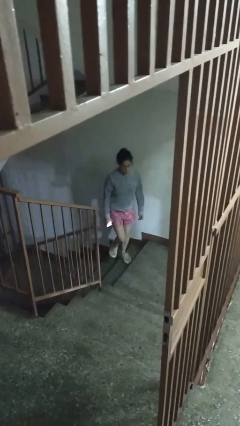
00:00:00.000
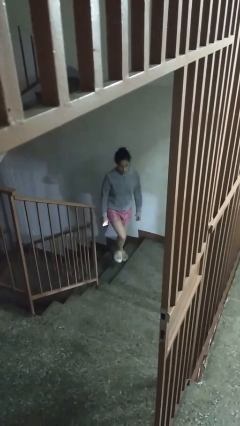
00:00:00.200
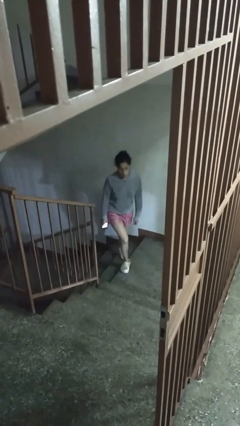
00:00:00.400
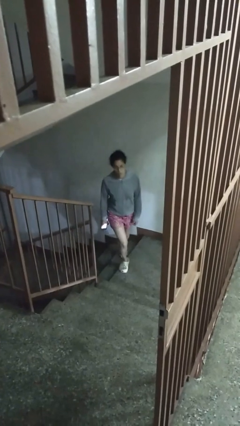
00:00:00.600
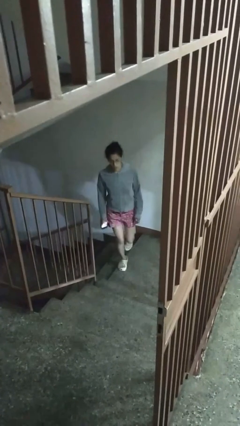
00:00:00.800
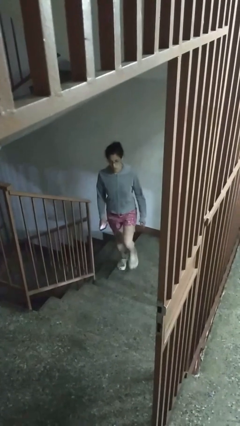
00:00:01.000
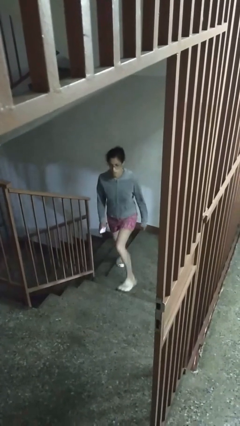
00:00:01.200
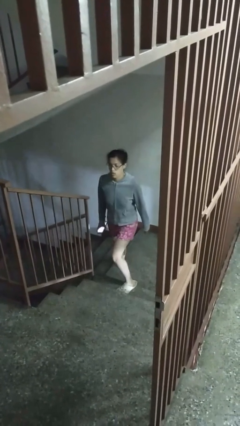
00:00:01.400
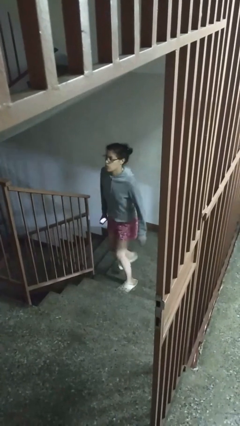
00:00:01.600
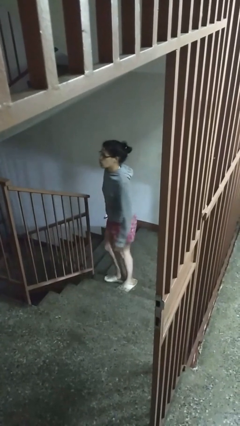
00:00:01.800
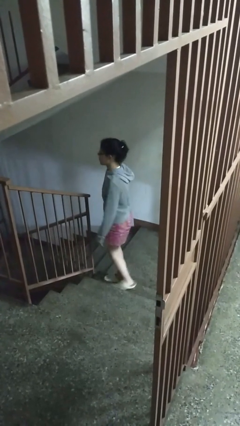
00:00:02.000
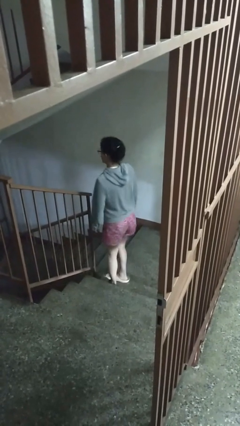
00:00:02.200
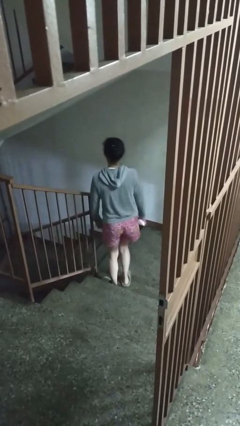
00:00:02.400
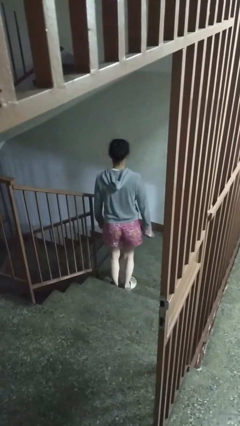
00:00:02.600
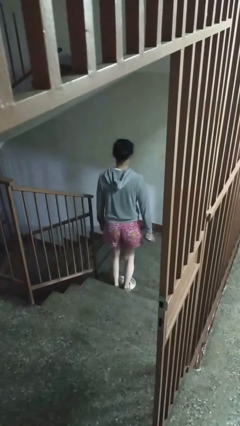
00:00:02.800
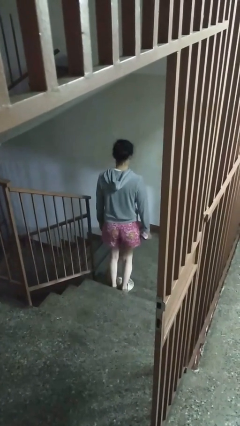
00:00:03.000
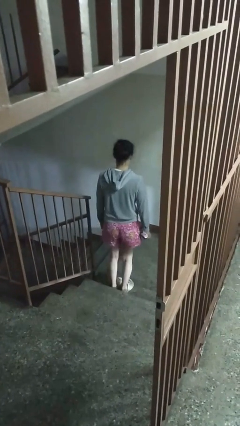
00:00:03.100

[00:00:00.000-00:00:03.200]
person climbs up stairs

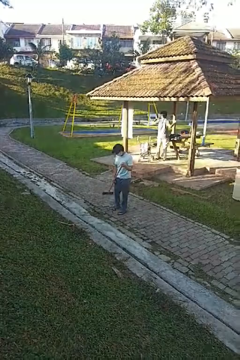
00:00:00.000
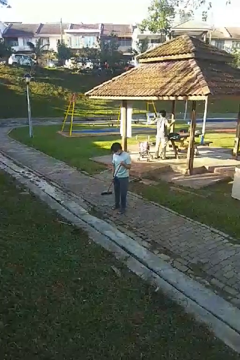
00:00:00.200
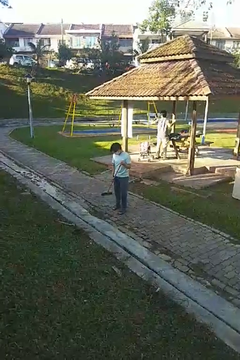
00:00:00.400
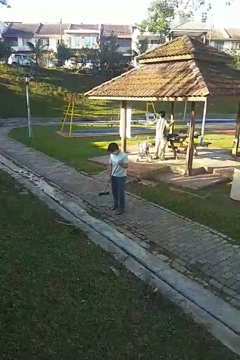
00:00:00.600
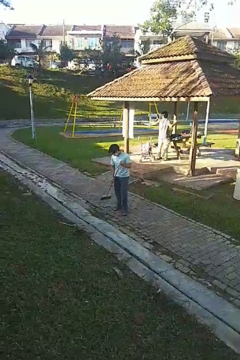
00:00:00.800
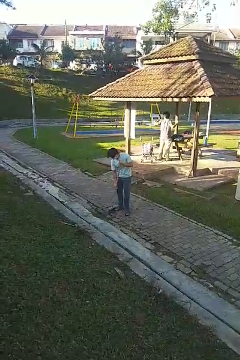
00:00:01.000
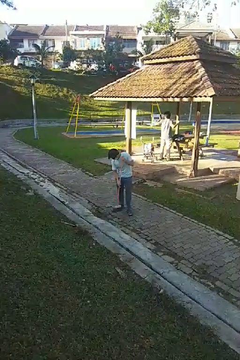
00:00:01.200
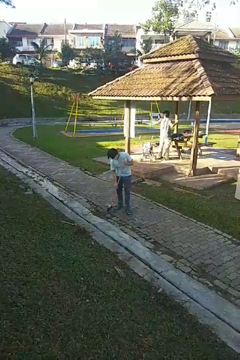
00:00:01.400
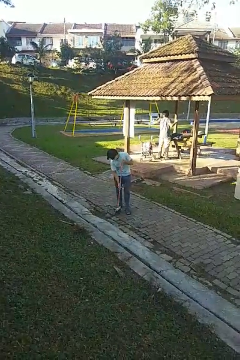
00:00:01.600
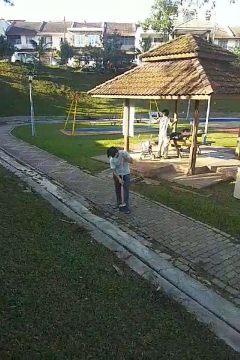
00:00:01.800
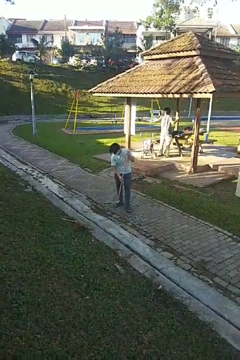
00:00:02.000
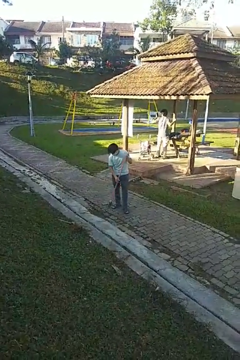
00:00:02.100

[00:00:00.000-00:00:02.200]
person sweeps floor

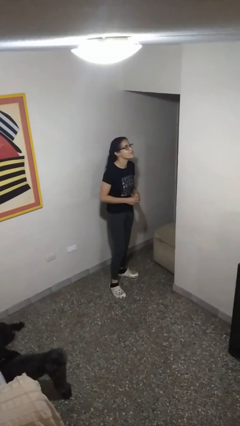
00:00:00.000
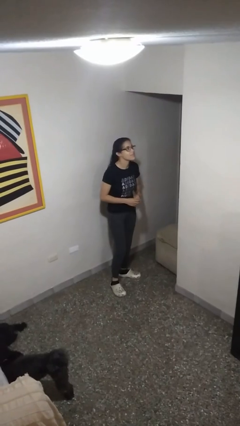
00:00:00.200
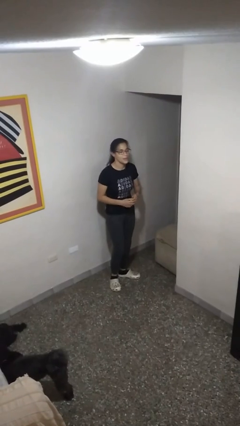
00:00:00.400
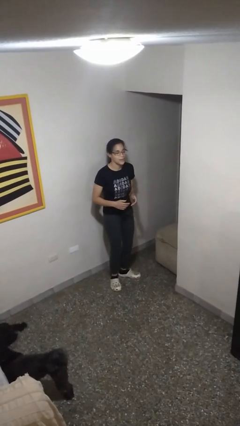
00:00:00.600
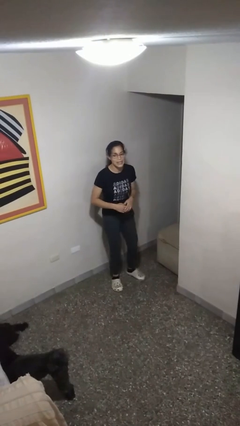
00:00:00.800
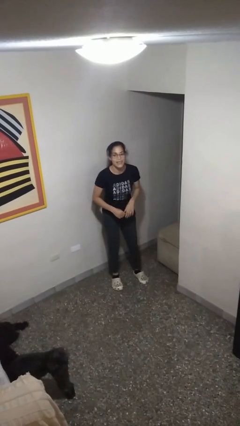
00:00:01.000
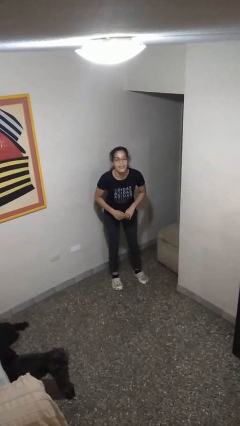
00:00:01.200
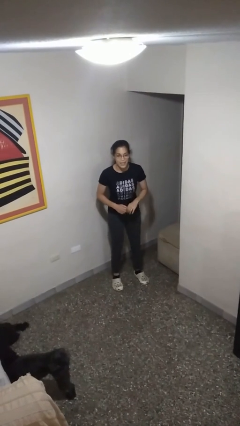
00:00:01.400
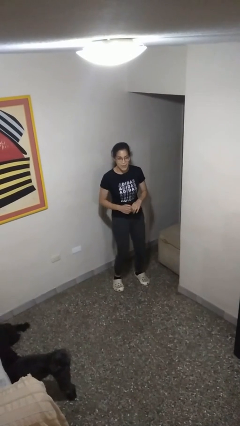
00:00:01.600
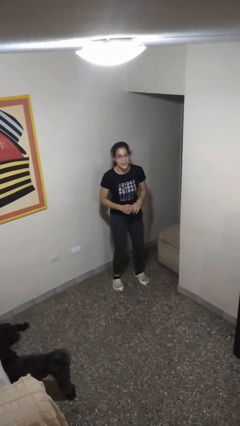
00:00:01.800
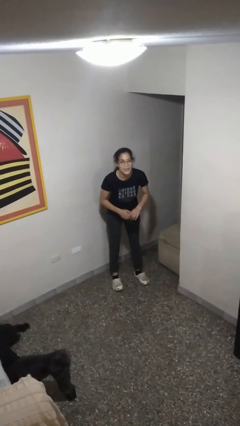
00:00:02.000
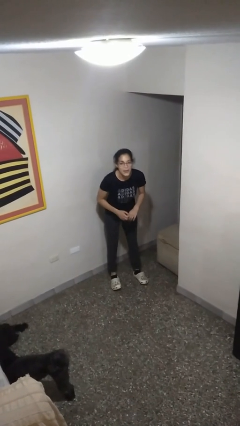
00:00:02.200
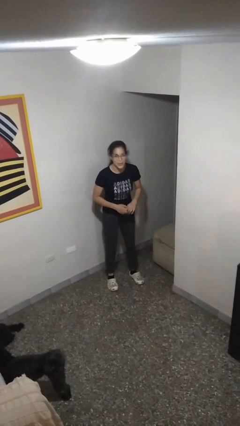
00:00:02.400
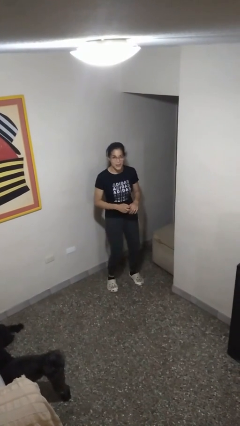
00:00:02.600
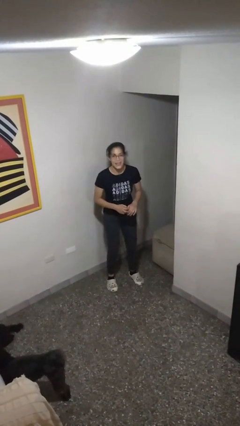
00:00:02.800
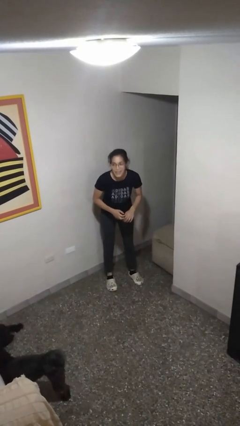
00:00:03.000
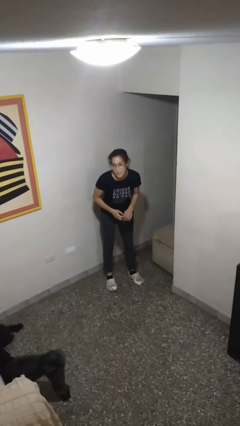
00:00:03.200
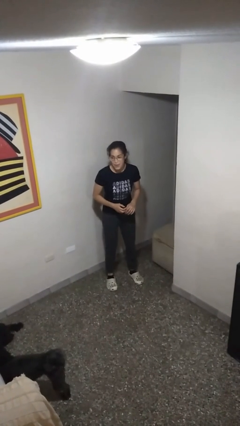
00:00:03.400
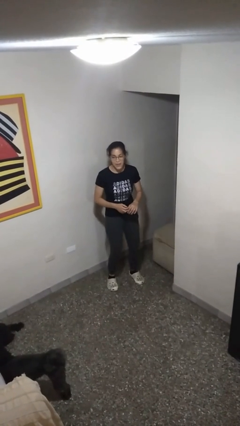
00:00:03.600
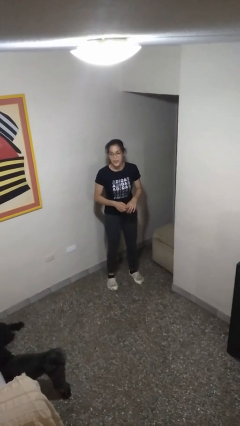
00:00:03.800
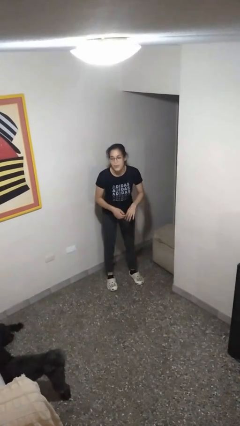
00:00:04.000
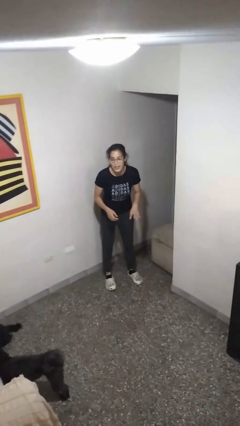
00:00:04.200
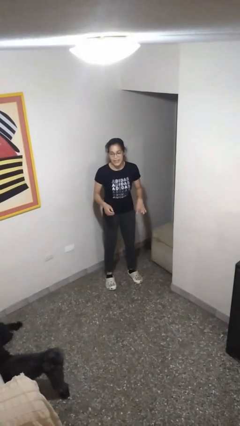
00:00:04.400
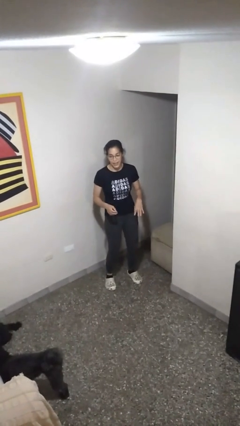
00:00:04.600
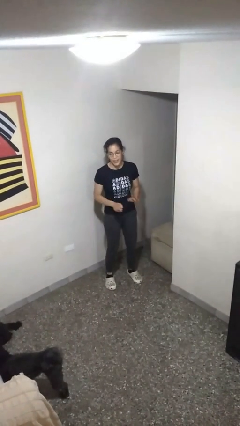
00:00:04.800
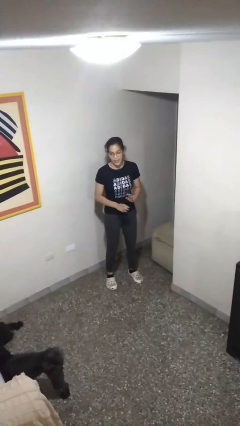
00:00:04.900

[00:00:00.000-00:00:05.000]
person wiggles hips

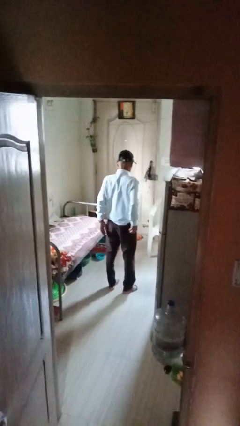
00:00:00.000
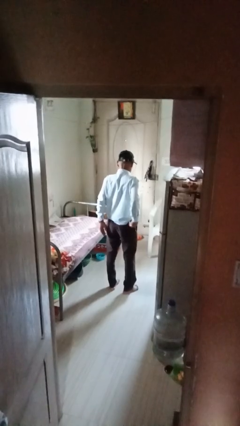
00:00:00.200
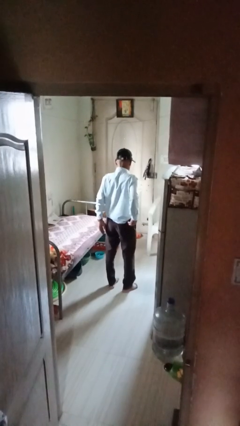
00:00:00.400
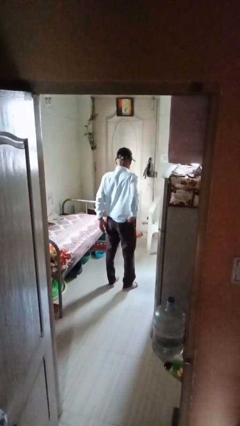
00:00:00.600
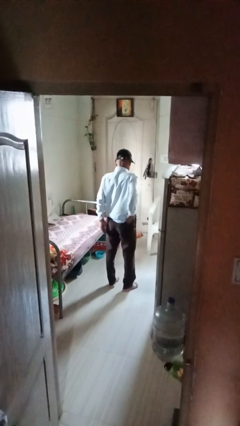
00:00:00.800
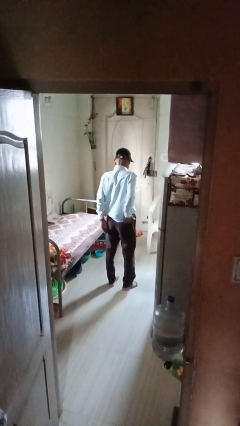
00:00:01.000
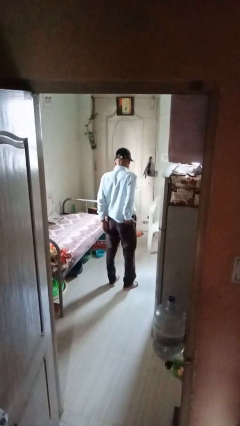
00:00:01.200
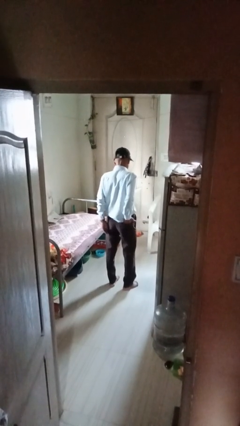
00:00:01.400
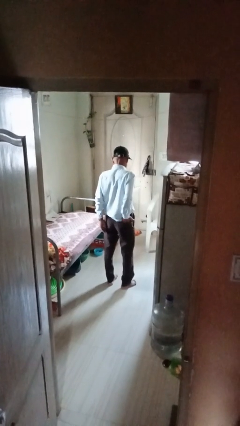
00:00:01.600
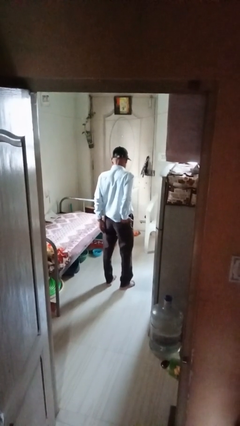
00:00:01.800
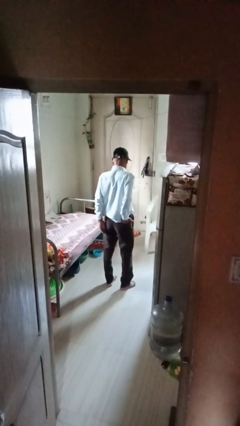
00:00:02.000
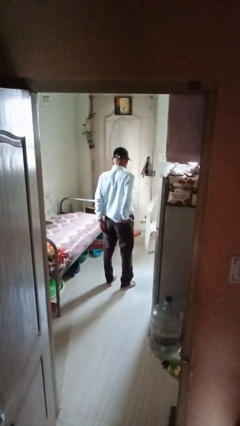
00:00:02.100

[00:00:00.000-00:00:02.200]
person puts hands in back pockets

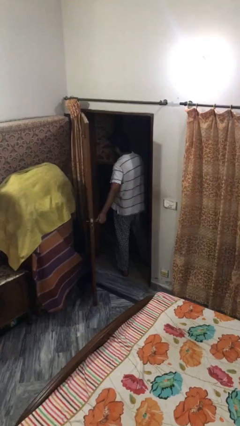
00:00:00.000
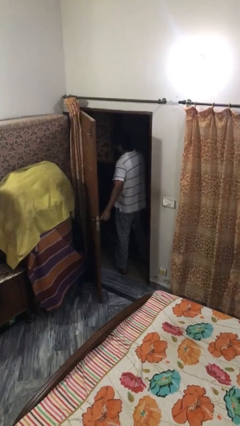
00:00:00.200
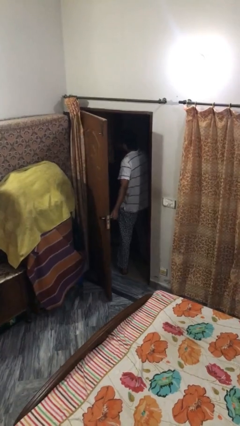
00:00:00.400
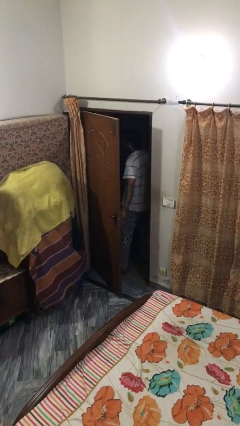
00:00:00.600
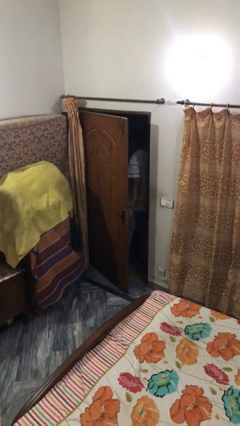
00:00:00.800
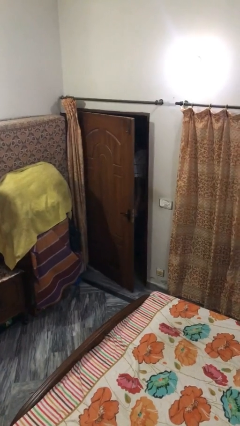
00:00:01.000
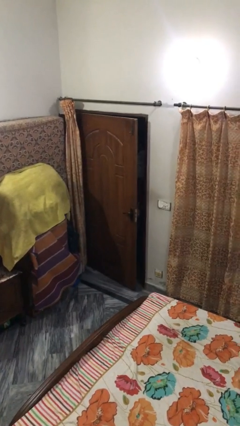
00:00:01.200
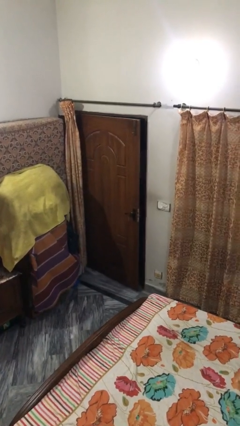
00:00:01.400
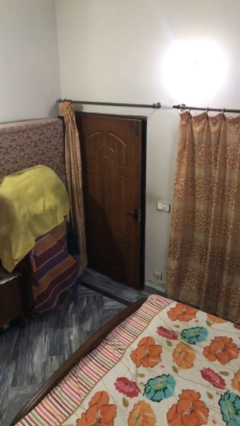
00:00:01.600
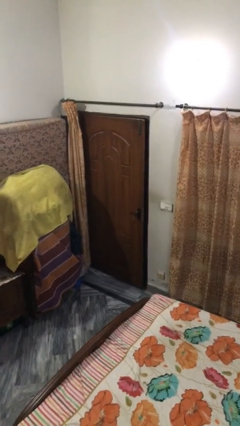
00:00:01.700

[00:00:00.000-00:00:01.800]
person closes facility door

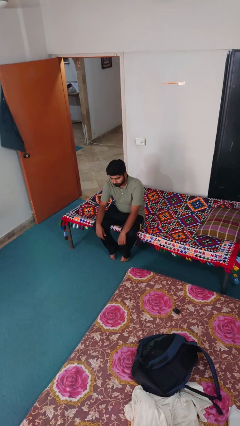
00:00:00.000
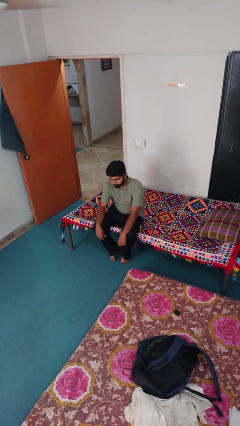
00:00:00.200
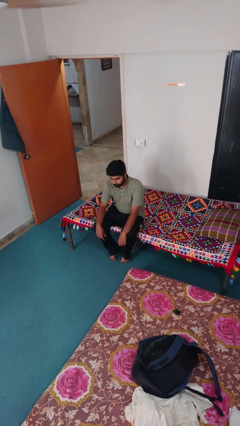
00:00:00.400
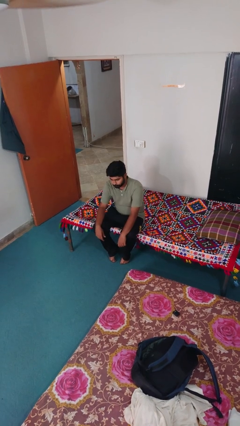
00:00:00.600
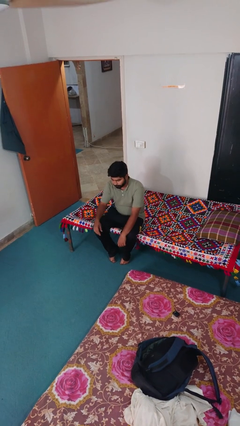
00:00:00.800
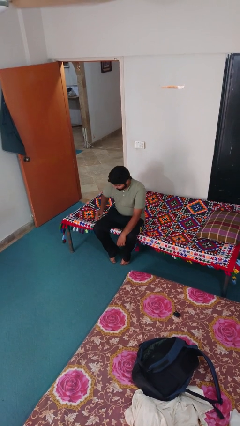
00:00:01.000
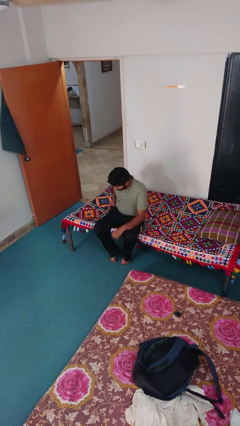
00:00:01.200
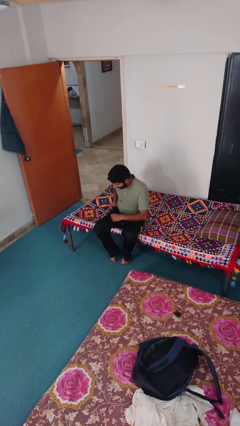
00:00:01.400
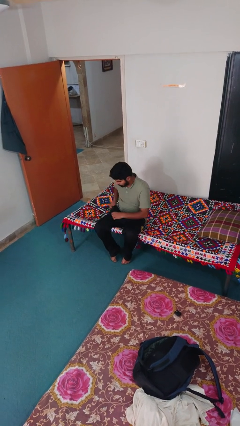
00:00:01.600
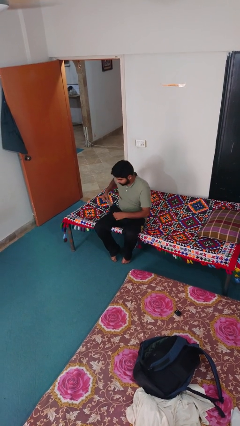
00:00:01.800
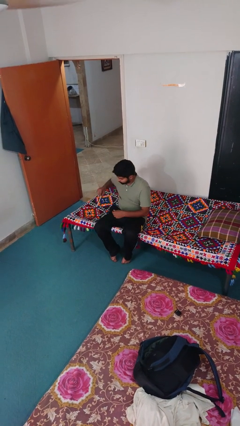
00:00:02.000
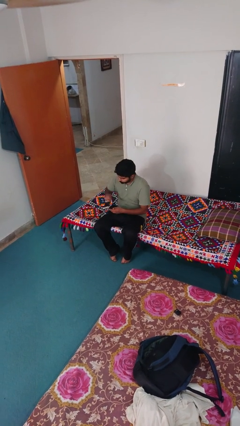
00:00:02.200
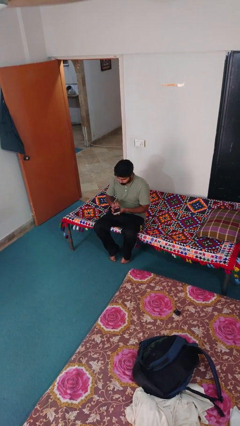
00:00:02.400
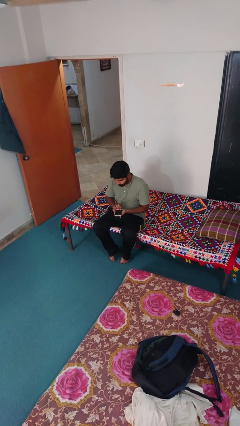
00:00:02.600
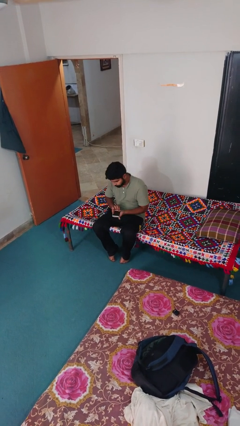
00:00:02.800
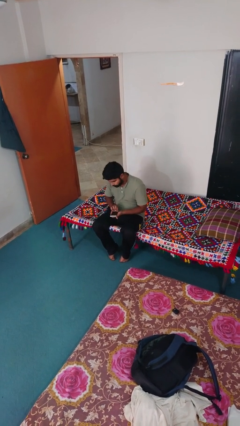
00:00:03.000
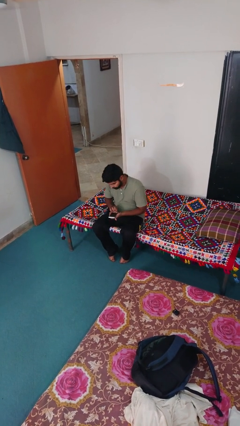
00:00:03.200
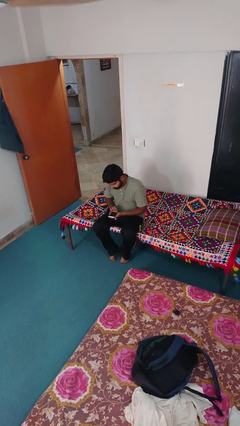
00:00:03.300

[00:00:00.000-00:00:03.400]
person takes phone from pocket

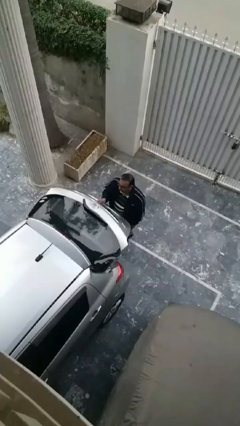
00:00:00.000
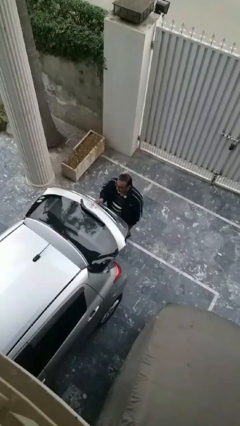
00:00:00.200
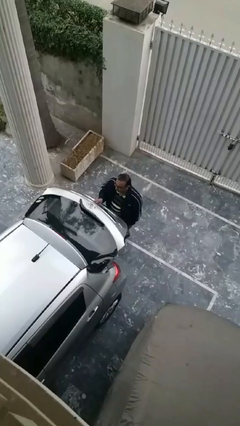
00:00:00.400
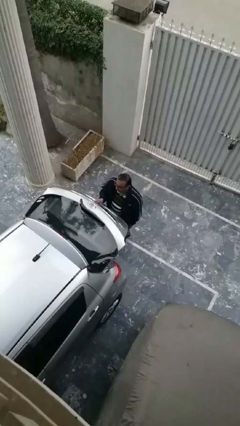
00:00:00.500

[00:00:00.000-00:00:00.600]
person opens car trunk
